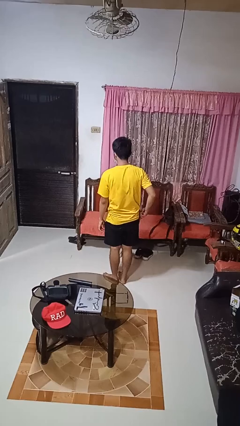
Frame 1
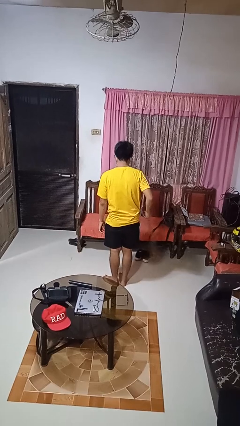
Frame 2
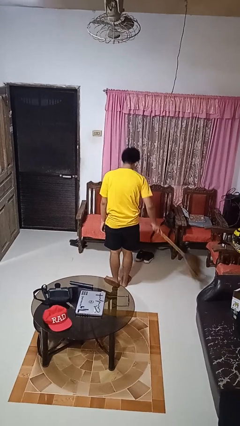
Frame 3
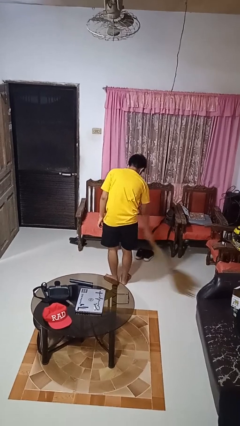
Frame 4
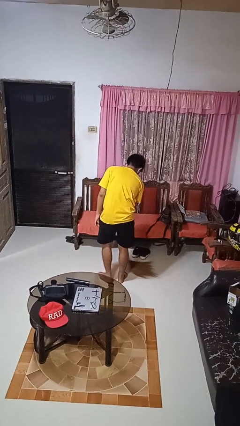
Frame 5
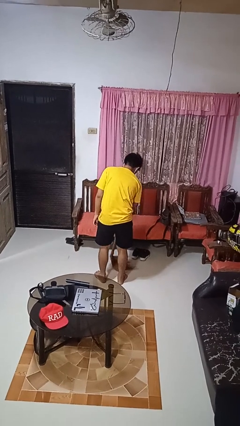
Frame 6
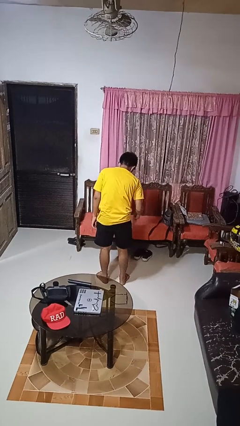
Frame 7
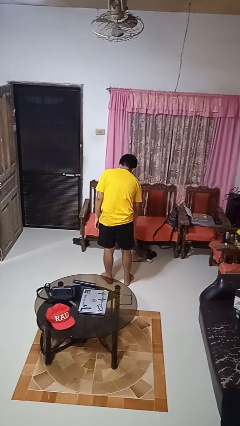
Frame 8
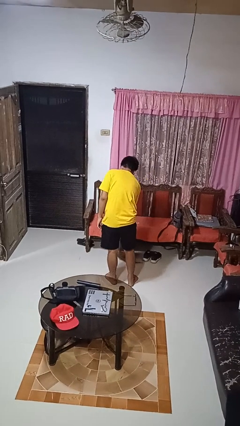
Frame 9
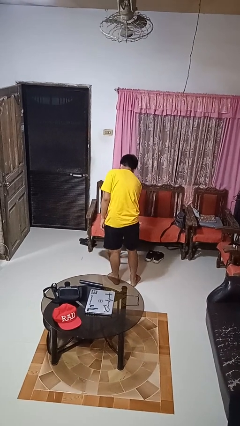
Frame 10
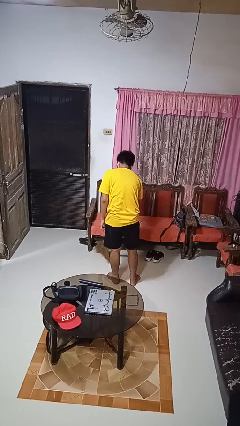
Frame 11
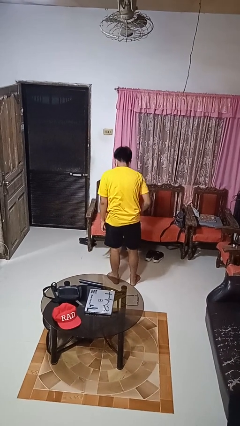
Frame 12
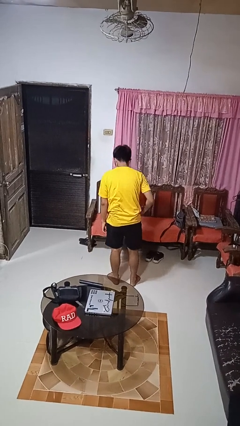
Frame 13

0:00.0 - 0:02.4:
person sweeps floor

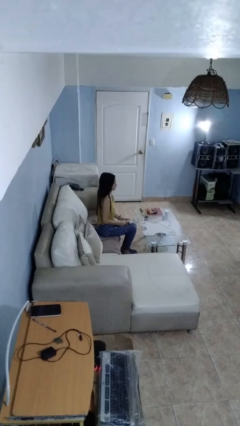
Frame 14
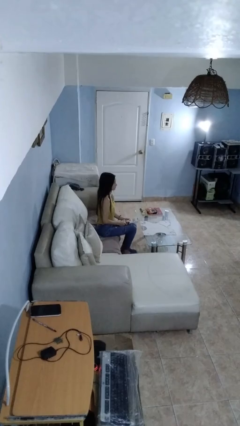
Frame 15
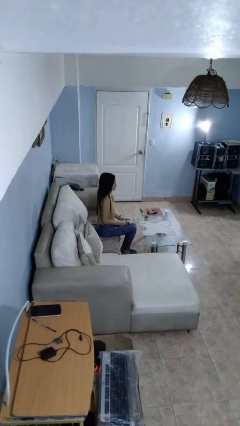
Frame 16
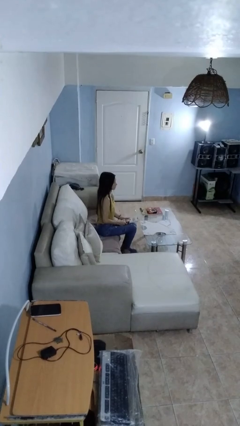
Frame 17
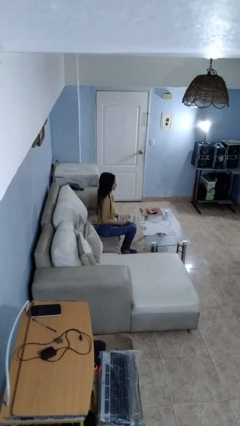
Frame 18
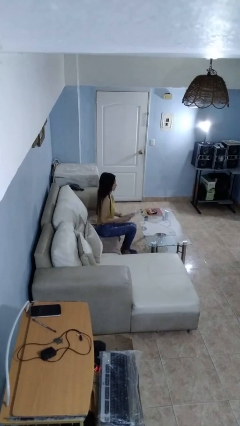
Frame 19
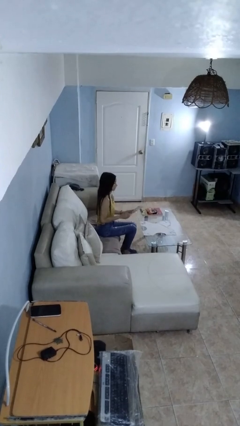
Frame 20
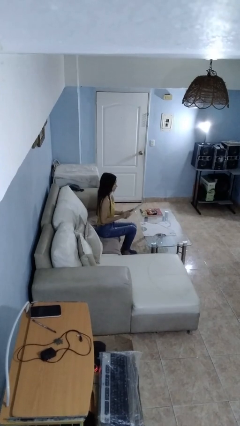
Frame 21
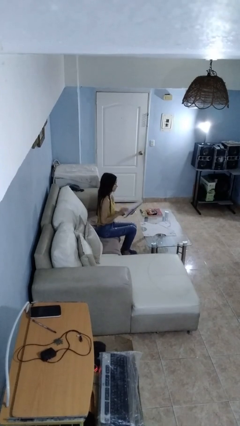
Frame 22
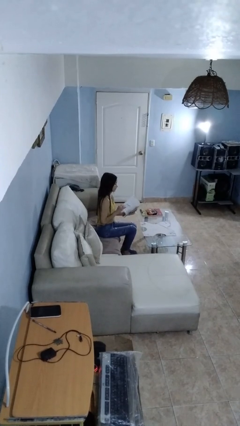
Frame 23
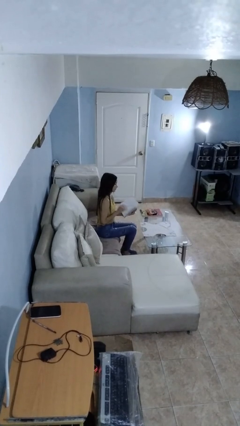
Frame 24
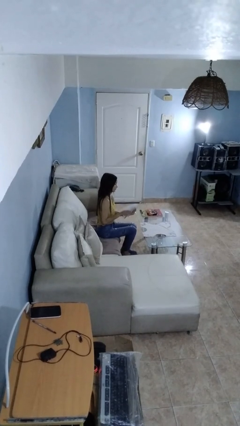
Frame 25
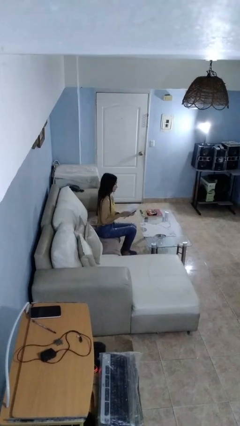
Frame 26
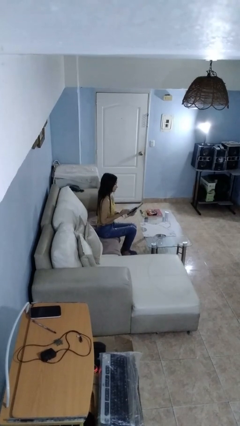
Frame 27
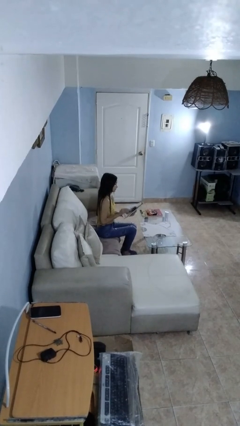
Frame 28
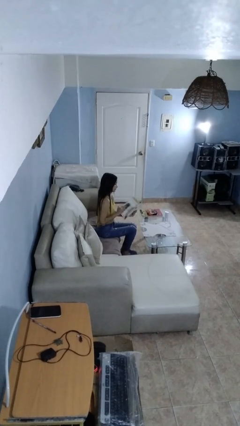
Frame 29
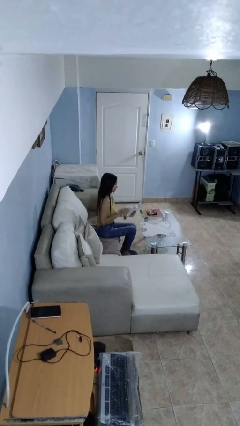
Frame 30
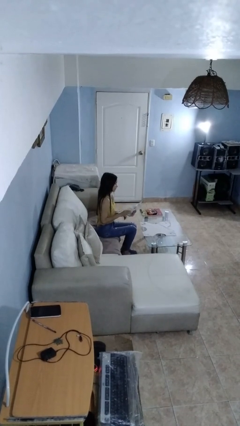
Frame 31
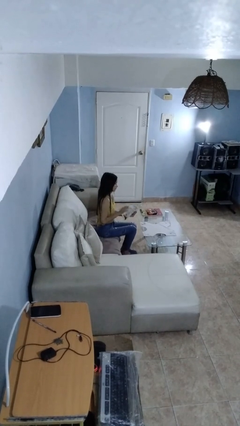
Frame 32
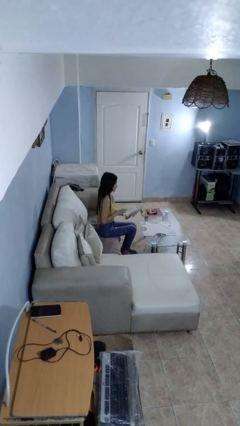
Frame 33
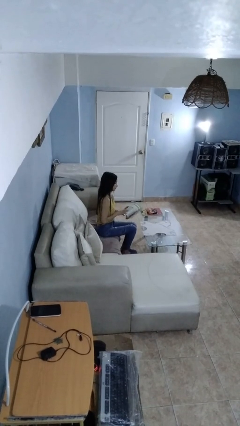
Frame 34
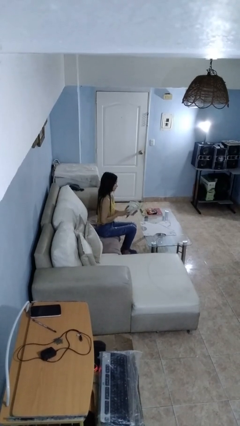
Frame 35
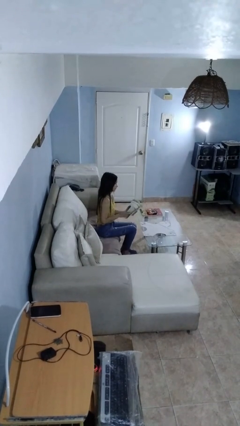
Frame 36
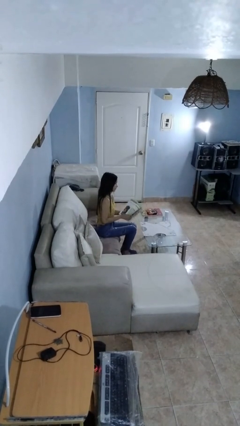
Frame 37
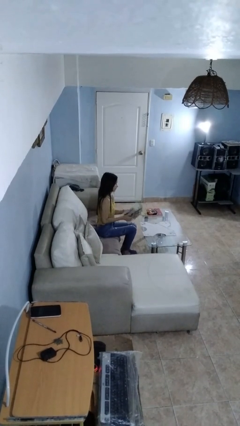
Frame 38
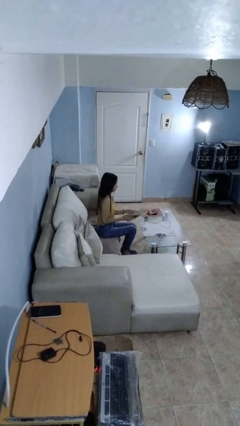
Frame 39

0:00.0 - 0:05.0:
person reads magazine

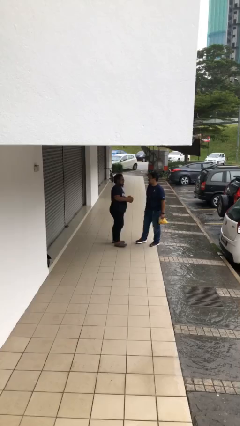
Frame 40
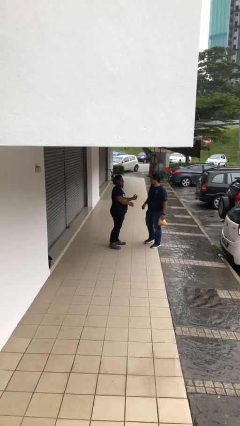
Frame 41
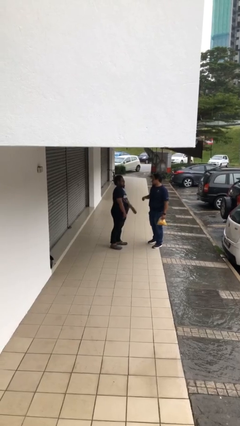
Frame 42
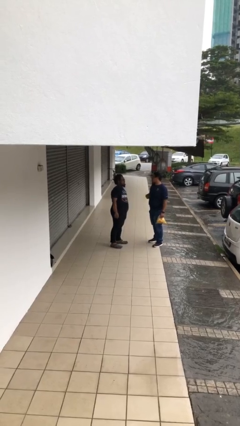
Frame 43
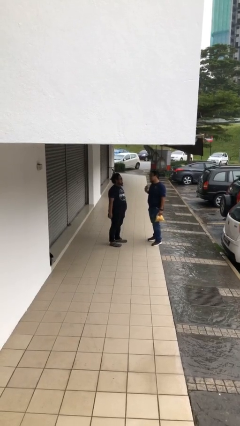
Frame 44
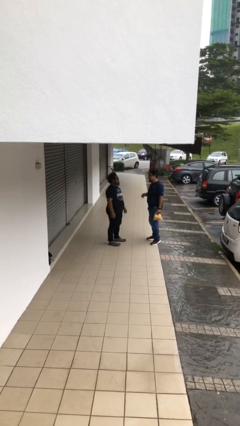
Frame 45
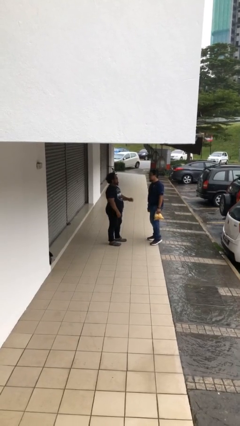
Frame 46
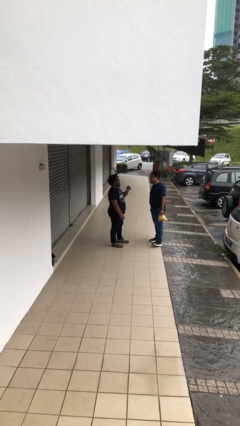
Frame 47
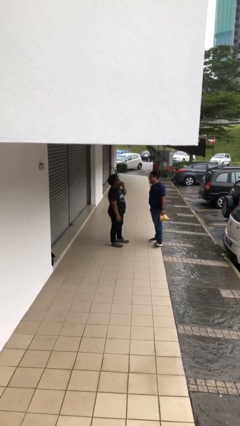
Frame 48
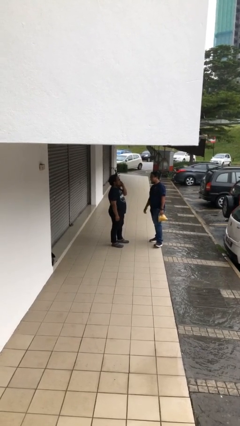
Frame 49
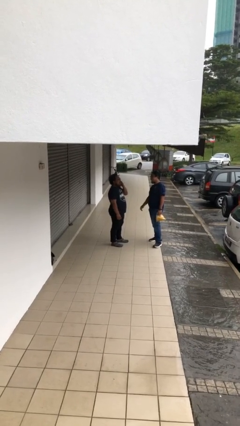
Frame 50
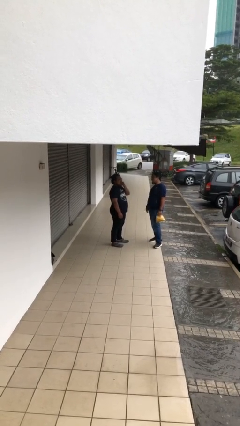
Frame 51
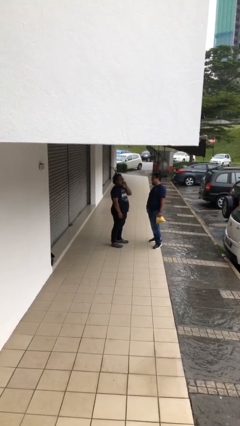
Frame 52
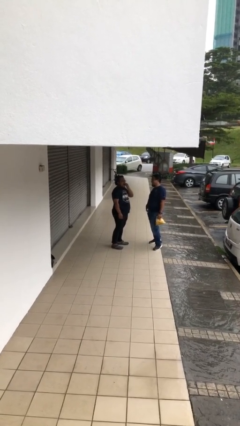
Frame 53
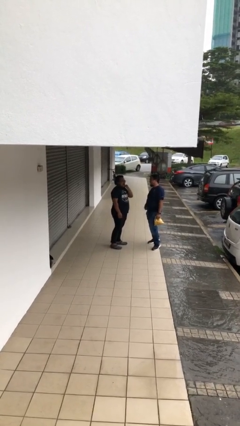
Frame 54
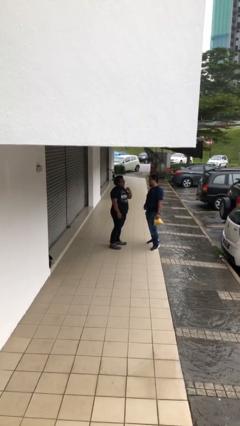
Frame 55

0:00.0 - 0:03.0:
person talks to person

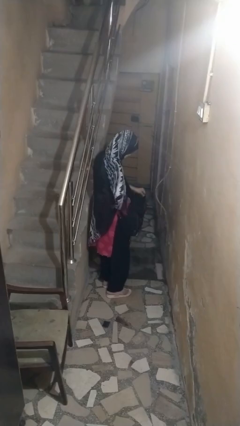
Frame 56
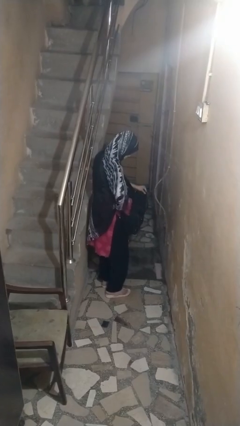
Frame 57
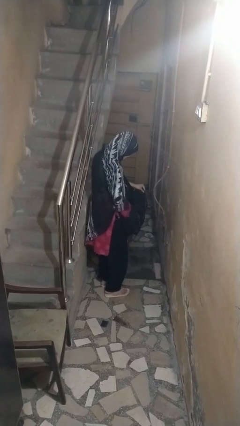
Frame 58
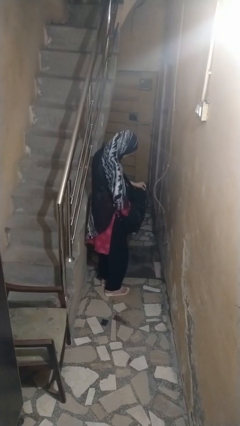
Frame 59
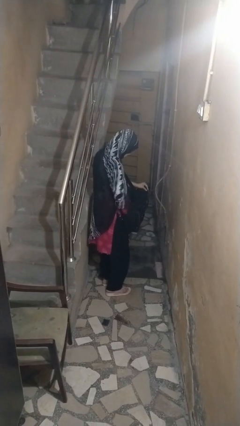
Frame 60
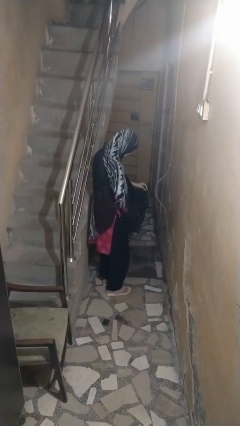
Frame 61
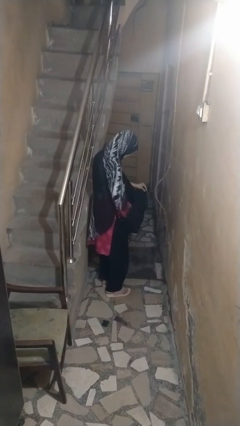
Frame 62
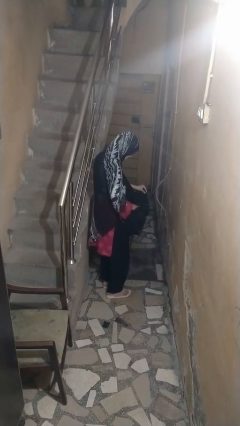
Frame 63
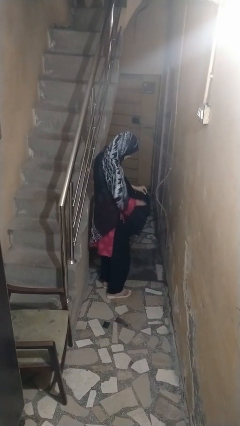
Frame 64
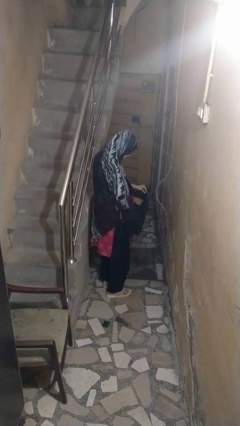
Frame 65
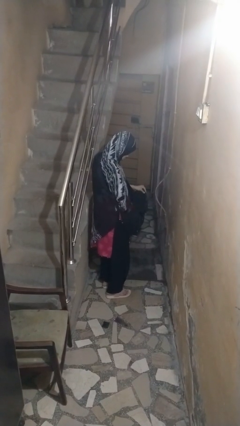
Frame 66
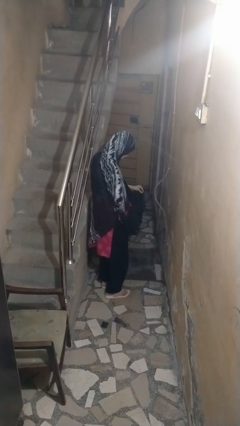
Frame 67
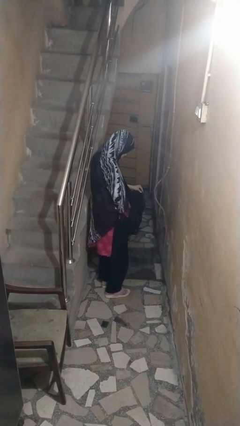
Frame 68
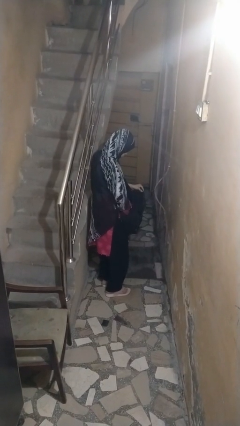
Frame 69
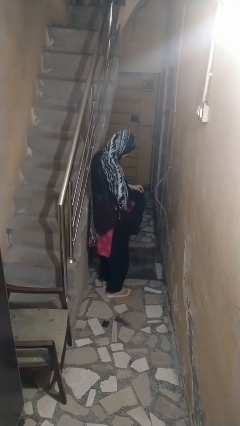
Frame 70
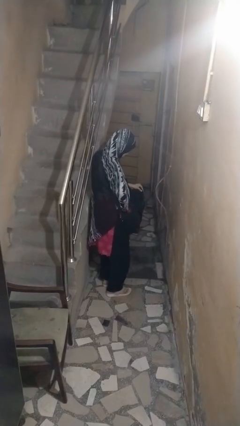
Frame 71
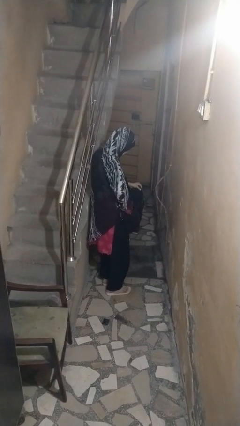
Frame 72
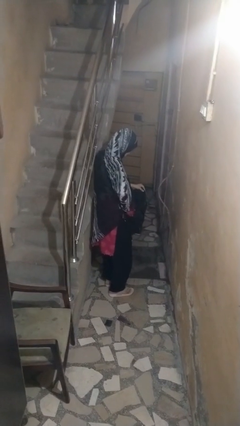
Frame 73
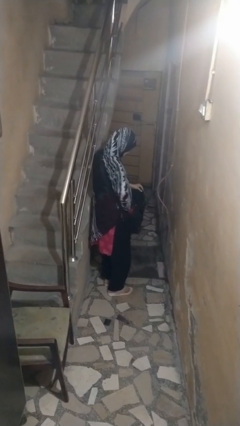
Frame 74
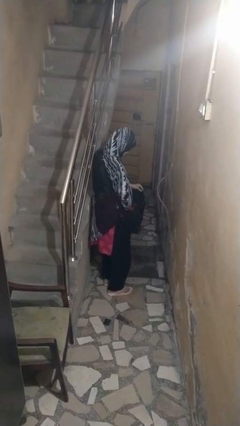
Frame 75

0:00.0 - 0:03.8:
person searches in backpack

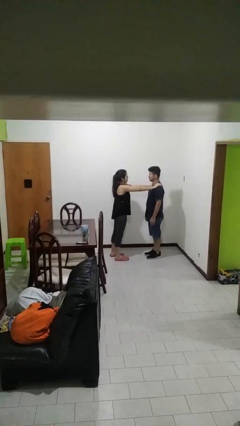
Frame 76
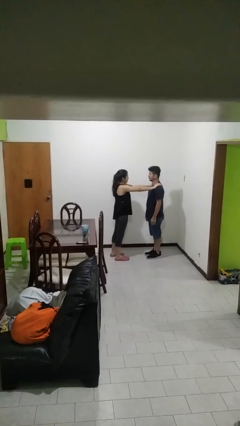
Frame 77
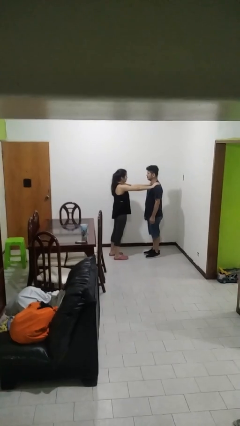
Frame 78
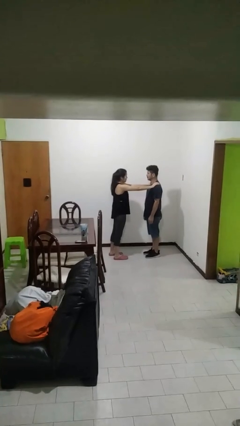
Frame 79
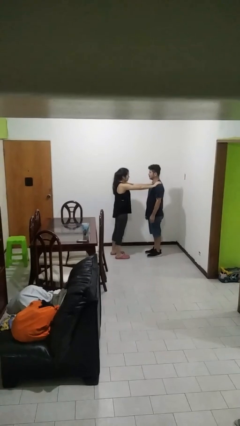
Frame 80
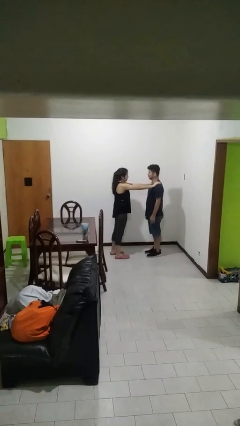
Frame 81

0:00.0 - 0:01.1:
person grabs person by shoulder

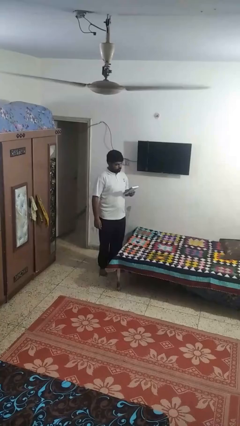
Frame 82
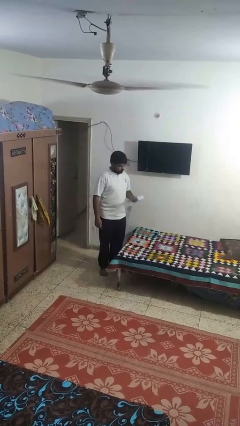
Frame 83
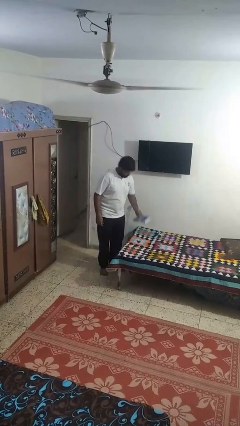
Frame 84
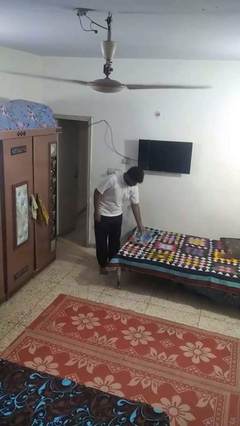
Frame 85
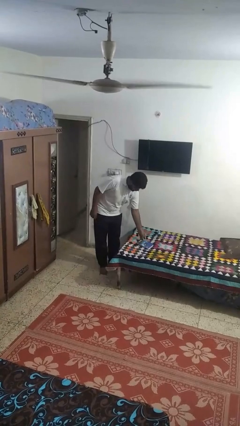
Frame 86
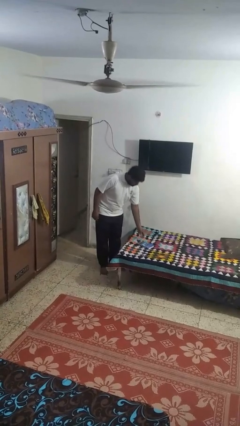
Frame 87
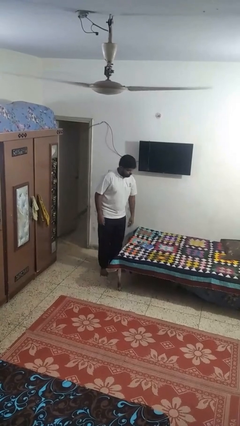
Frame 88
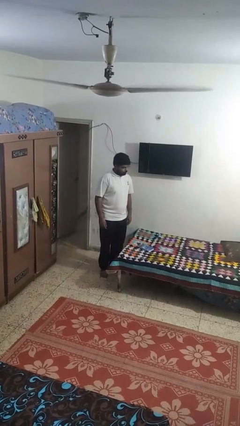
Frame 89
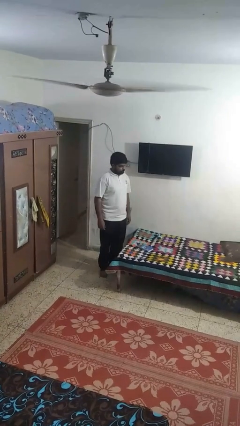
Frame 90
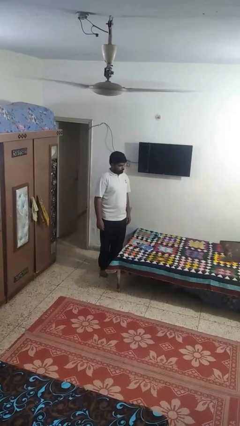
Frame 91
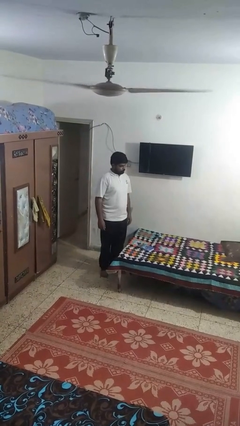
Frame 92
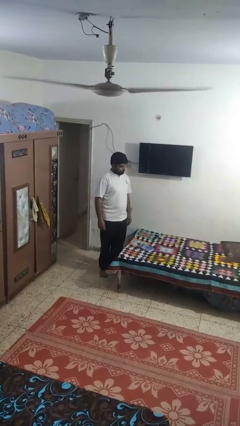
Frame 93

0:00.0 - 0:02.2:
person puts down object on bed
